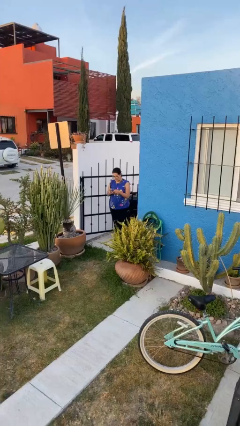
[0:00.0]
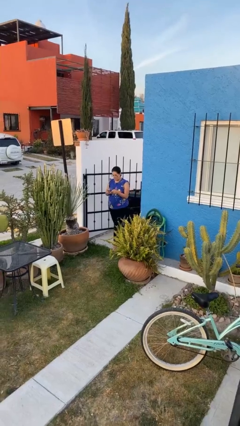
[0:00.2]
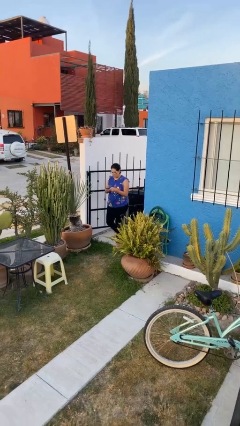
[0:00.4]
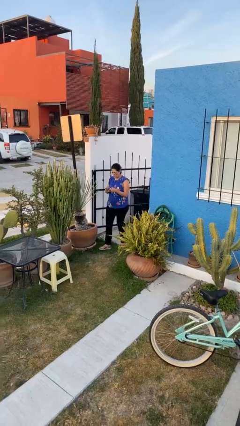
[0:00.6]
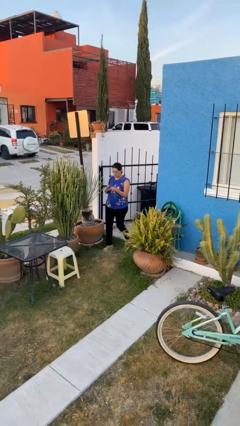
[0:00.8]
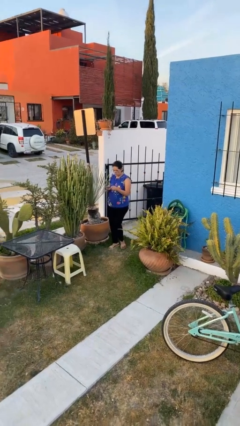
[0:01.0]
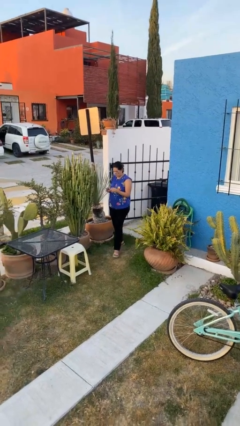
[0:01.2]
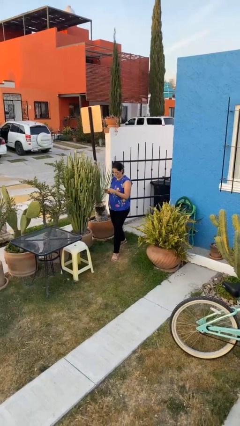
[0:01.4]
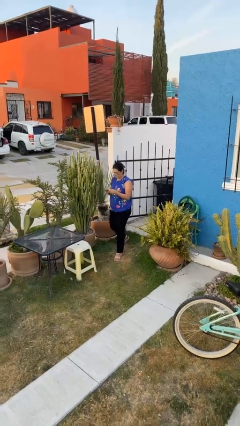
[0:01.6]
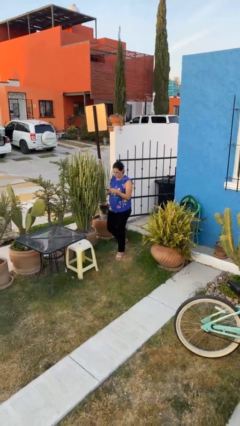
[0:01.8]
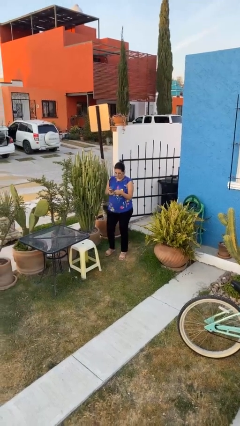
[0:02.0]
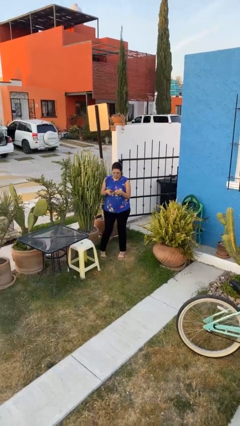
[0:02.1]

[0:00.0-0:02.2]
person enters scene through structure

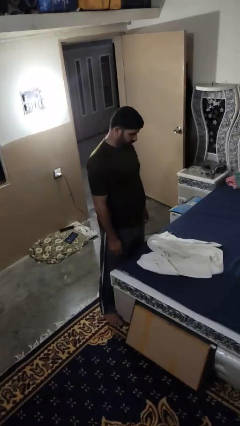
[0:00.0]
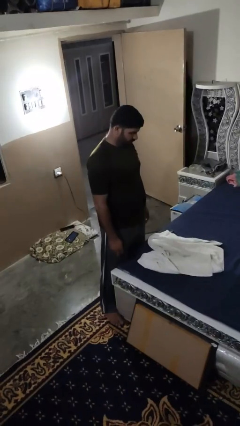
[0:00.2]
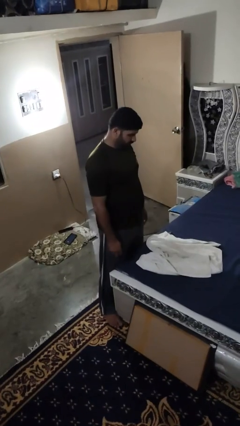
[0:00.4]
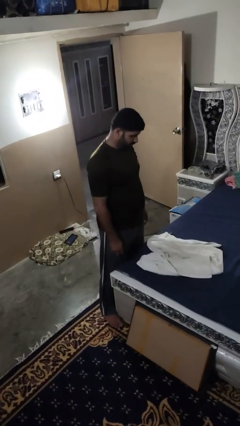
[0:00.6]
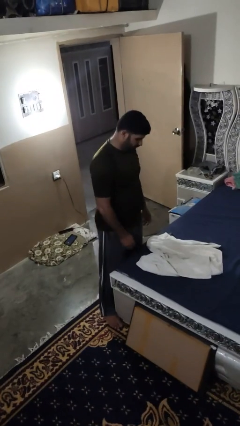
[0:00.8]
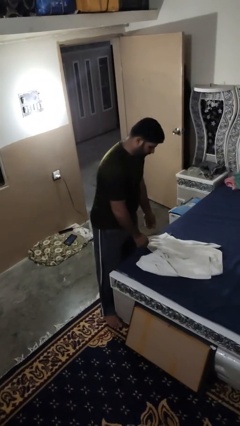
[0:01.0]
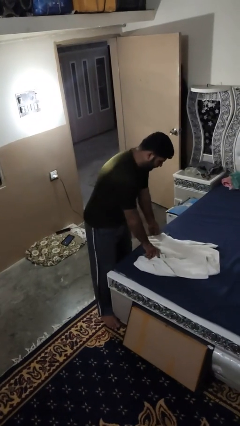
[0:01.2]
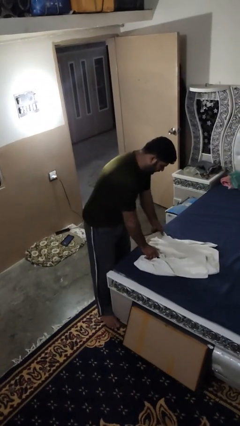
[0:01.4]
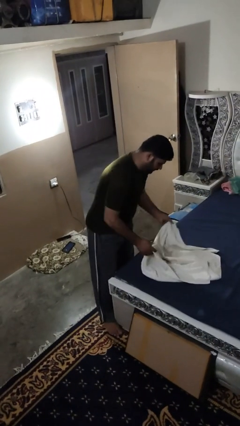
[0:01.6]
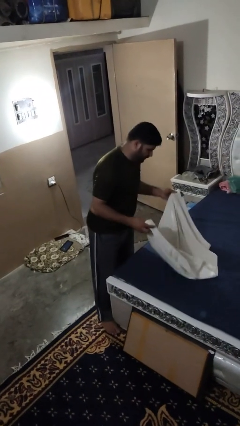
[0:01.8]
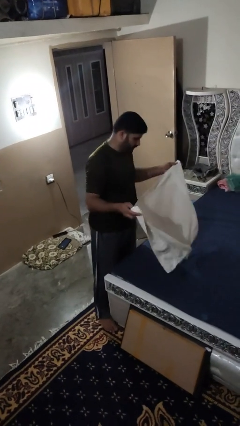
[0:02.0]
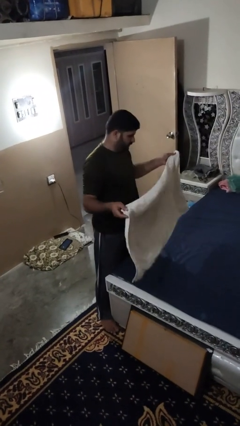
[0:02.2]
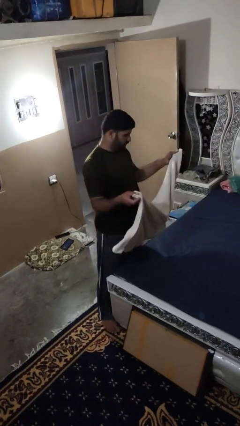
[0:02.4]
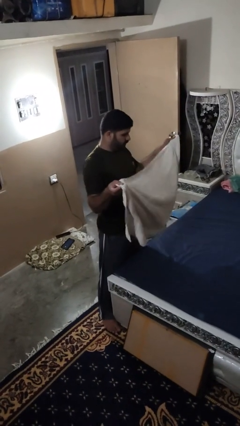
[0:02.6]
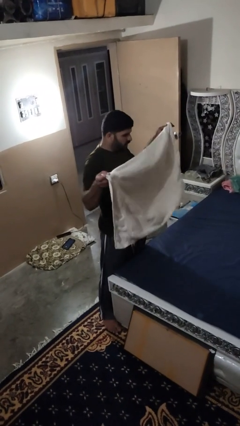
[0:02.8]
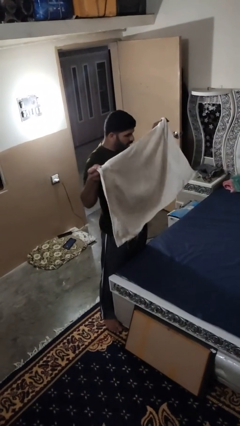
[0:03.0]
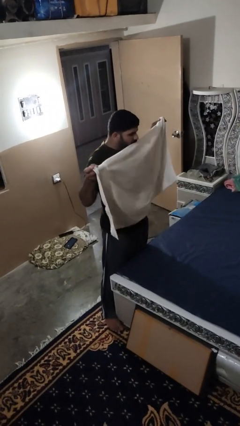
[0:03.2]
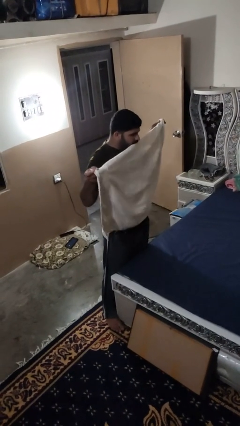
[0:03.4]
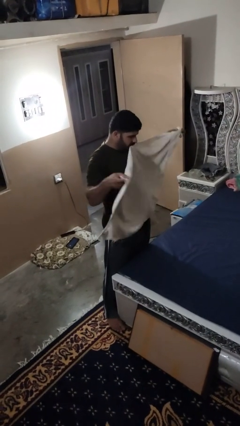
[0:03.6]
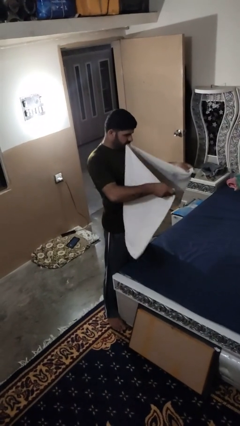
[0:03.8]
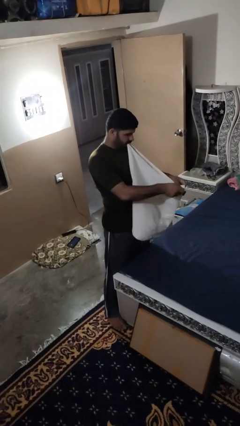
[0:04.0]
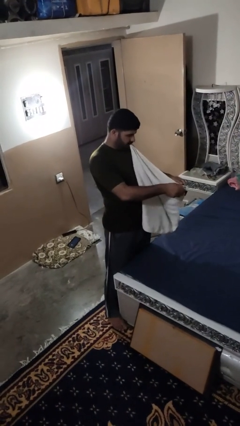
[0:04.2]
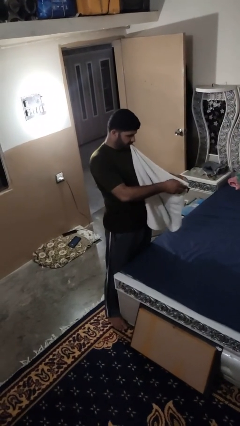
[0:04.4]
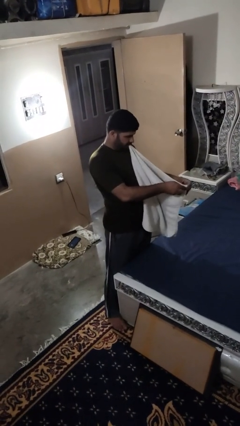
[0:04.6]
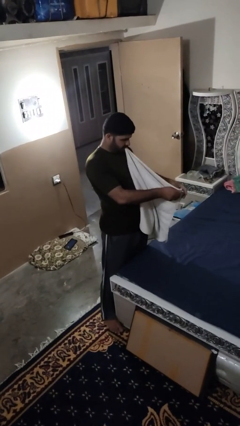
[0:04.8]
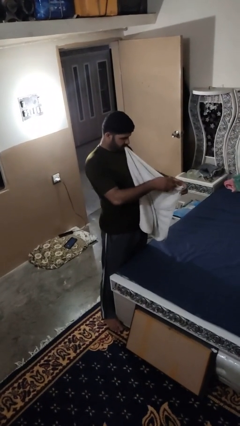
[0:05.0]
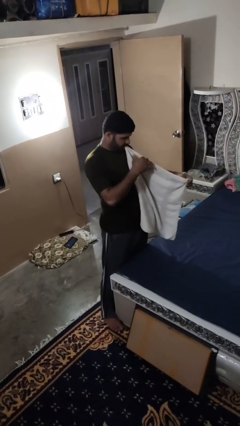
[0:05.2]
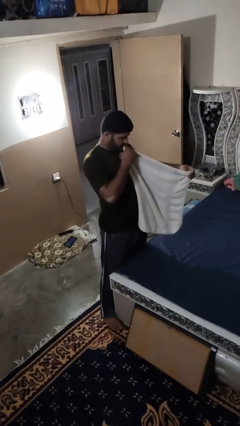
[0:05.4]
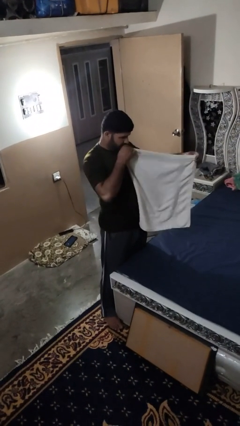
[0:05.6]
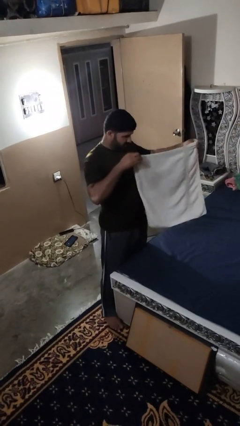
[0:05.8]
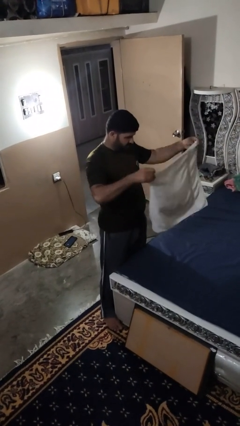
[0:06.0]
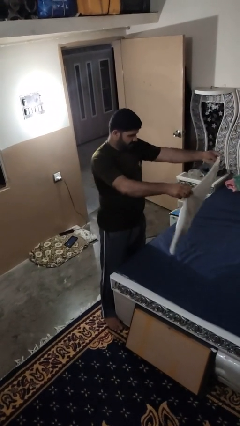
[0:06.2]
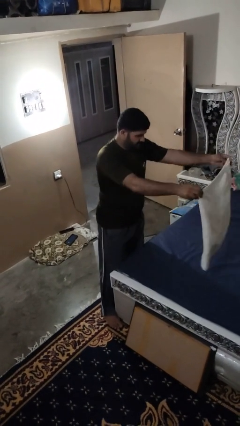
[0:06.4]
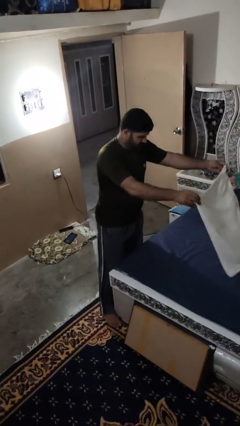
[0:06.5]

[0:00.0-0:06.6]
person folds towel

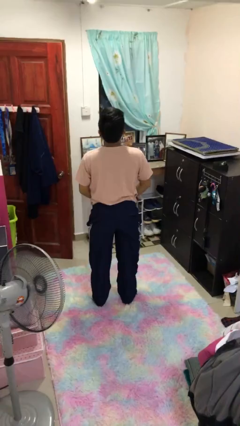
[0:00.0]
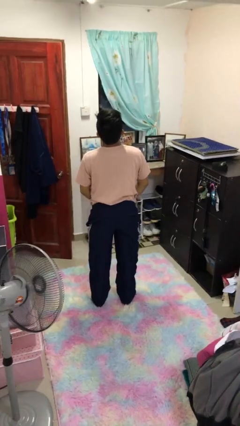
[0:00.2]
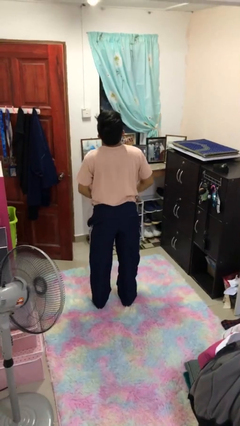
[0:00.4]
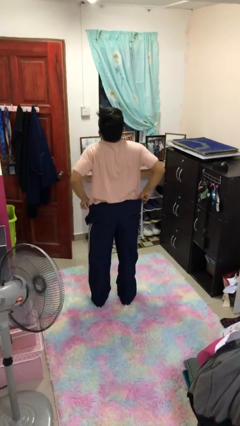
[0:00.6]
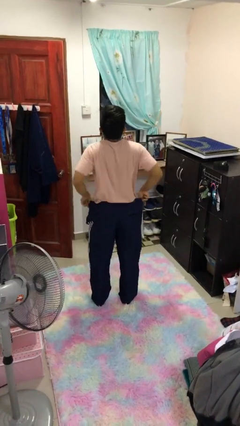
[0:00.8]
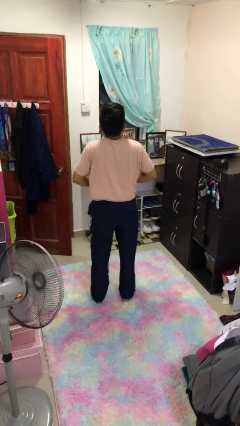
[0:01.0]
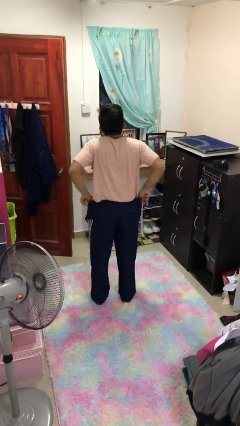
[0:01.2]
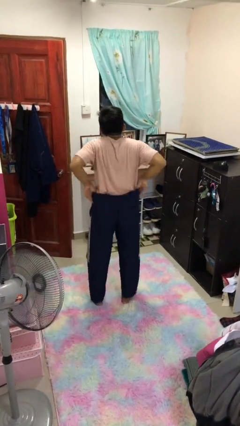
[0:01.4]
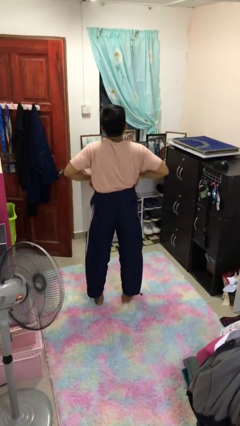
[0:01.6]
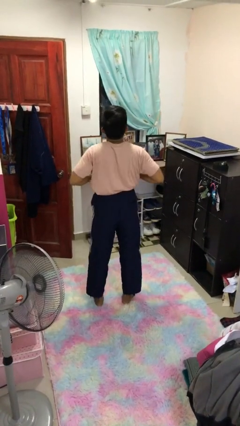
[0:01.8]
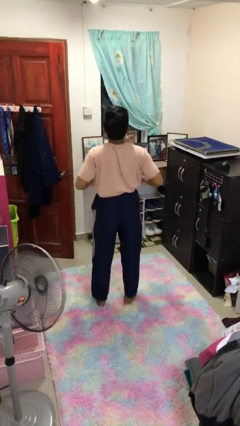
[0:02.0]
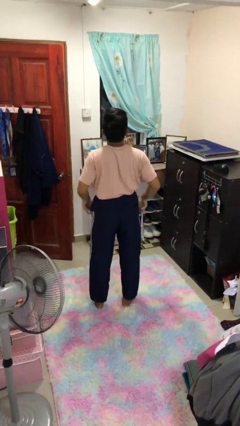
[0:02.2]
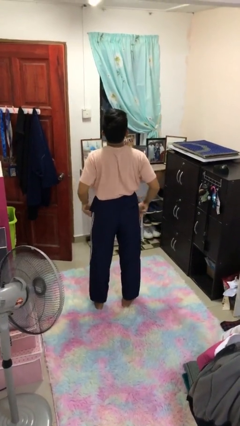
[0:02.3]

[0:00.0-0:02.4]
person hikes up pants

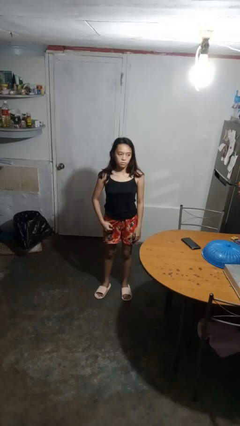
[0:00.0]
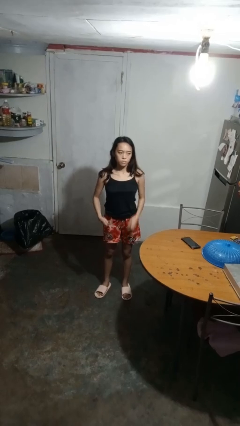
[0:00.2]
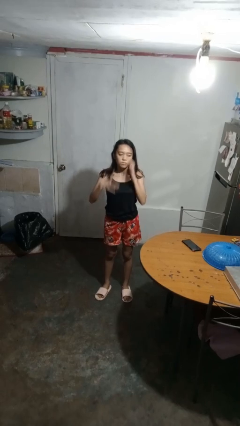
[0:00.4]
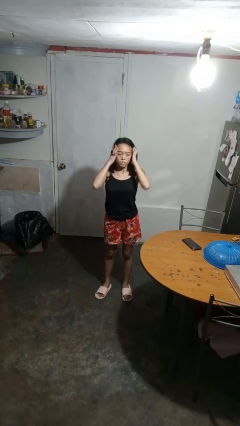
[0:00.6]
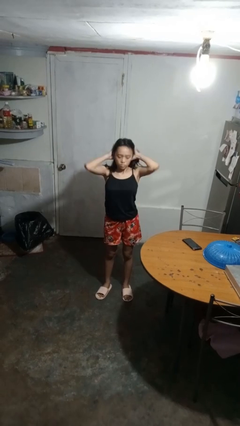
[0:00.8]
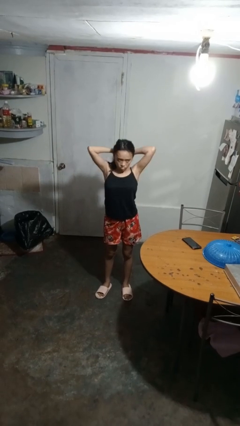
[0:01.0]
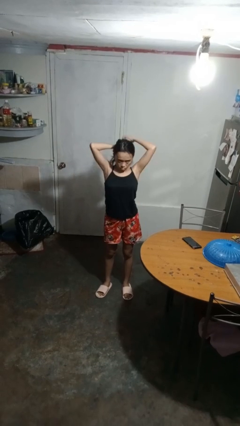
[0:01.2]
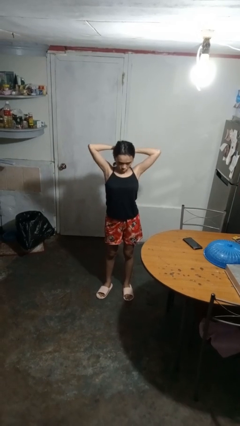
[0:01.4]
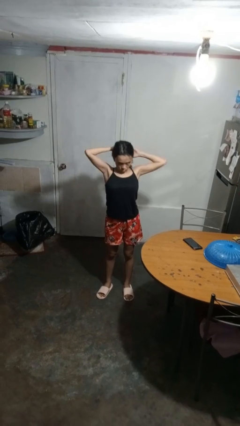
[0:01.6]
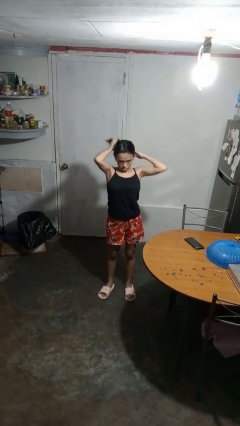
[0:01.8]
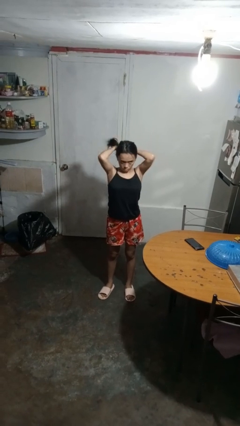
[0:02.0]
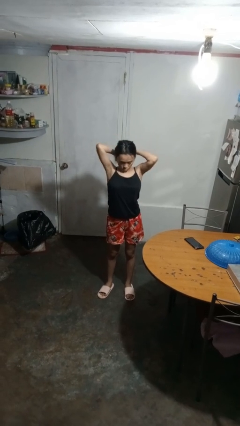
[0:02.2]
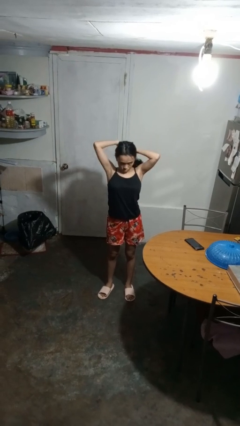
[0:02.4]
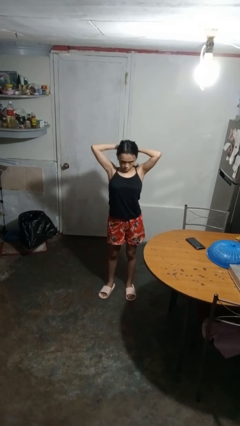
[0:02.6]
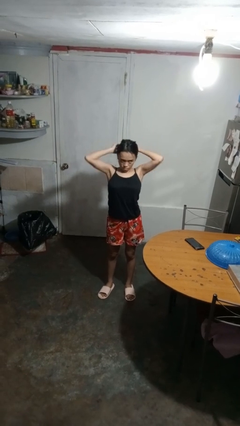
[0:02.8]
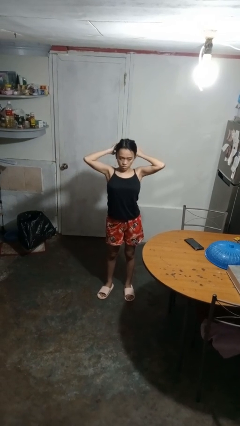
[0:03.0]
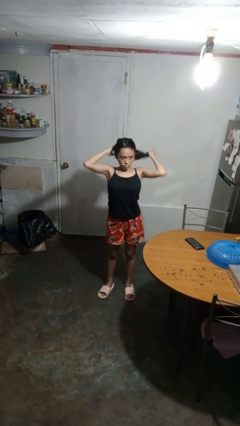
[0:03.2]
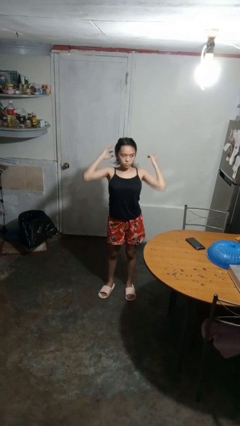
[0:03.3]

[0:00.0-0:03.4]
person puts hair in ponytail

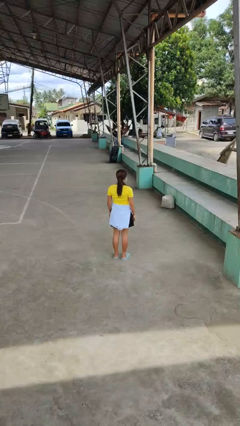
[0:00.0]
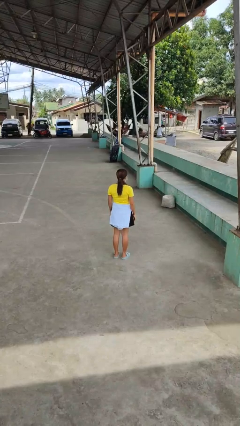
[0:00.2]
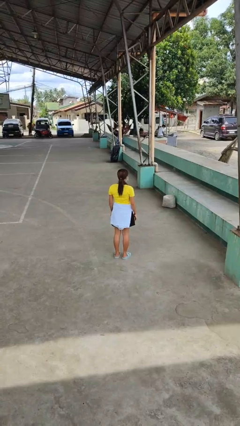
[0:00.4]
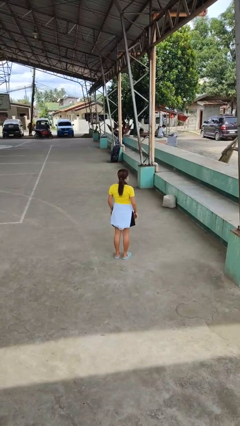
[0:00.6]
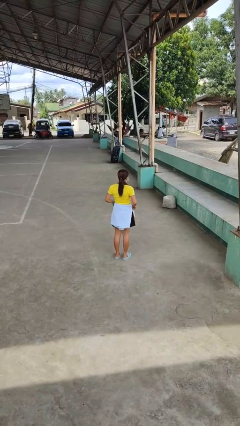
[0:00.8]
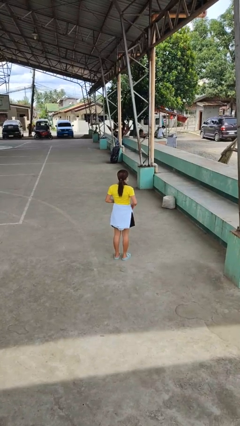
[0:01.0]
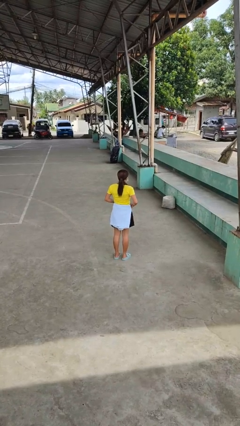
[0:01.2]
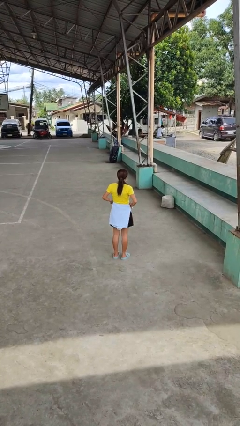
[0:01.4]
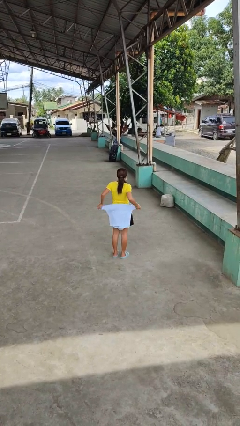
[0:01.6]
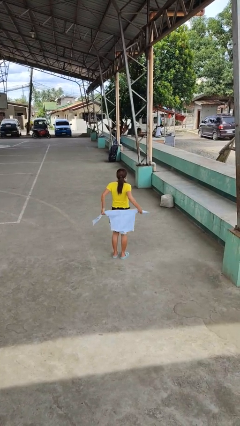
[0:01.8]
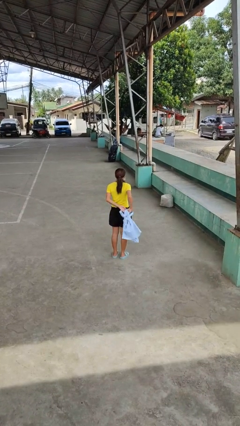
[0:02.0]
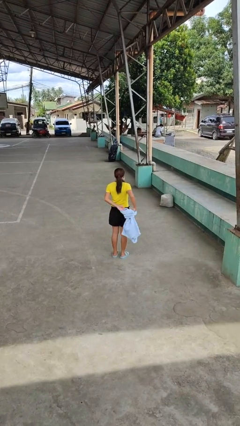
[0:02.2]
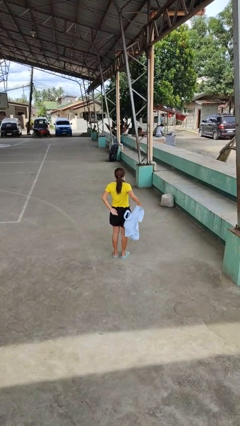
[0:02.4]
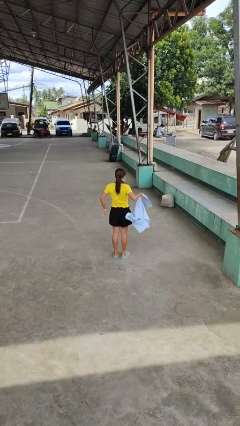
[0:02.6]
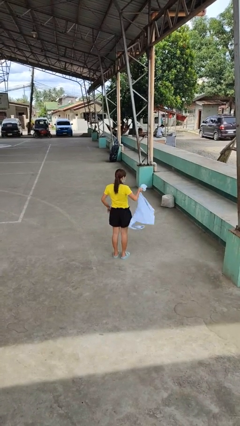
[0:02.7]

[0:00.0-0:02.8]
person unties jacket around waist

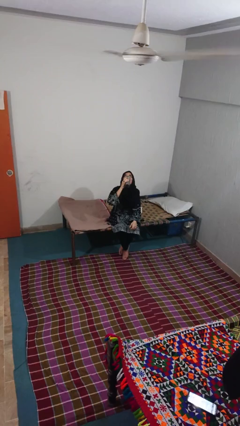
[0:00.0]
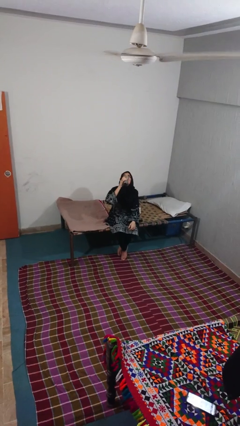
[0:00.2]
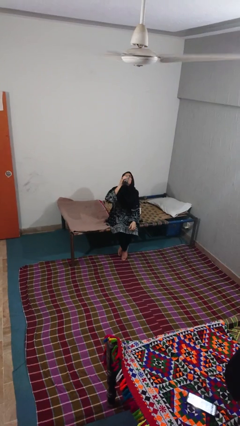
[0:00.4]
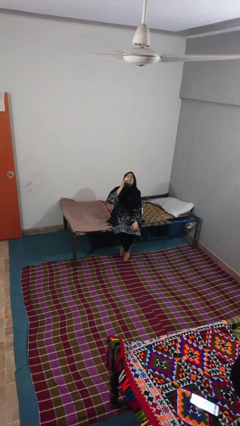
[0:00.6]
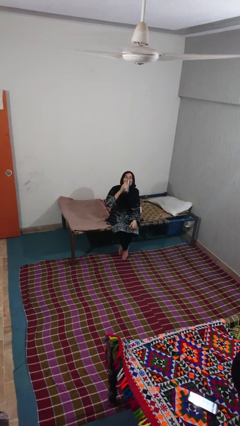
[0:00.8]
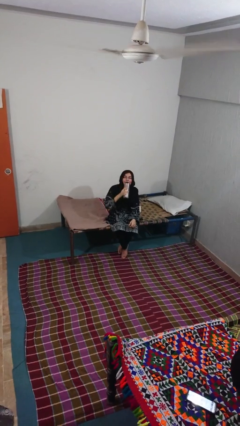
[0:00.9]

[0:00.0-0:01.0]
person drinks from beverage can
